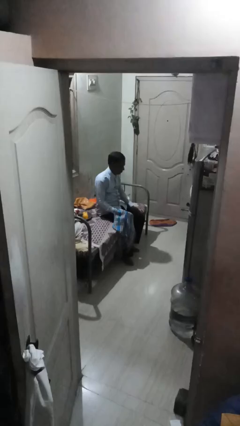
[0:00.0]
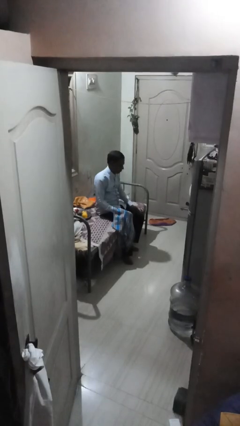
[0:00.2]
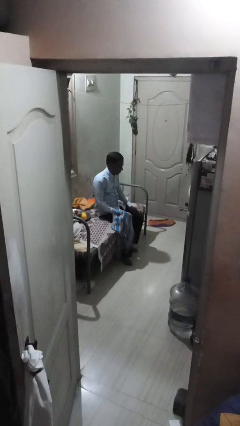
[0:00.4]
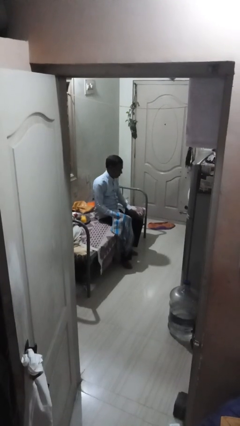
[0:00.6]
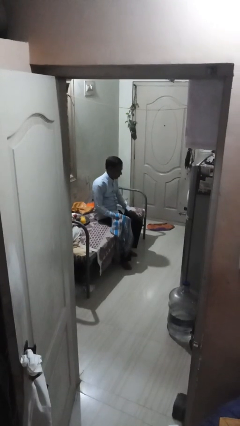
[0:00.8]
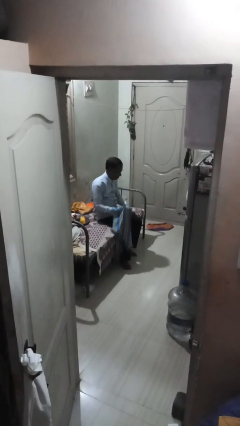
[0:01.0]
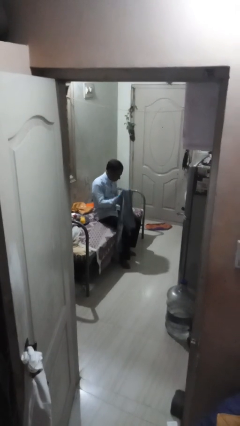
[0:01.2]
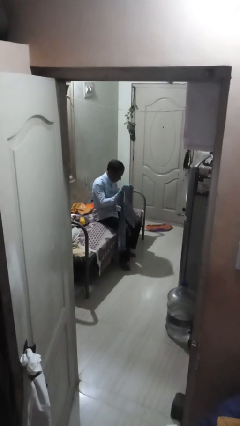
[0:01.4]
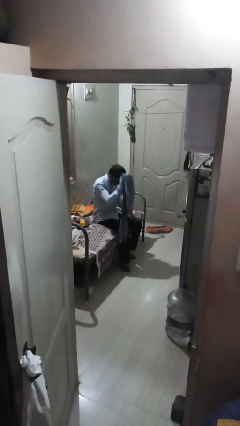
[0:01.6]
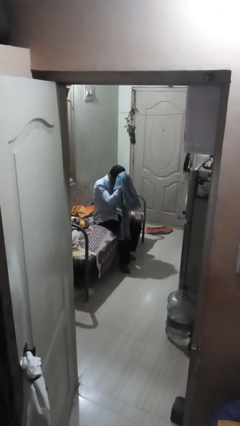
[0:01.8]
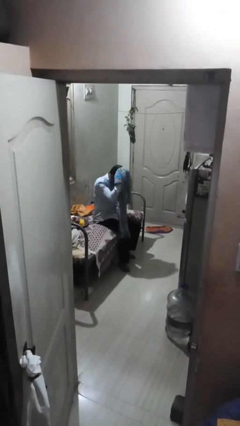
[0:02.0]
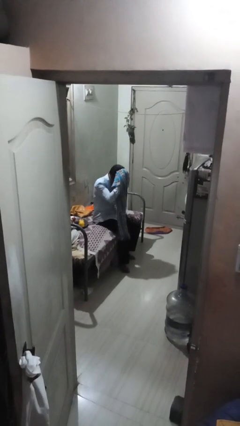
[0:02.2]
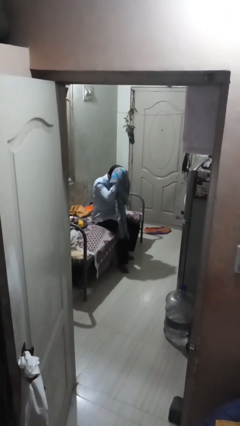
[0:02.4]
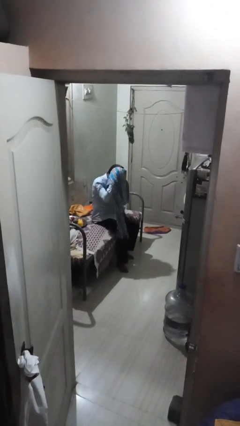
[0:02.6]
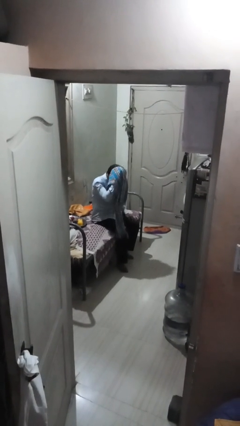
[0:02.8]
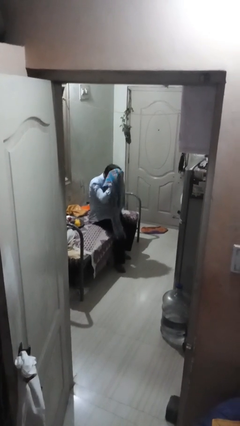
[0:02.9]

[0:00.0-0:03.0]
person dries hair with towel

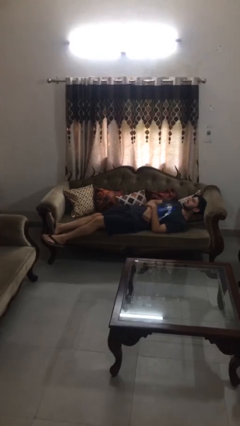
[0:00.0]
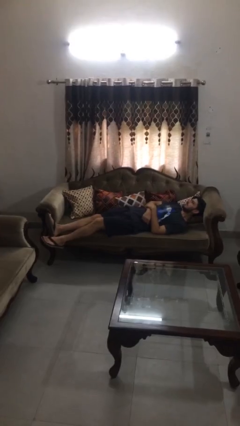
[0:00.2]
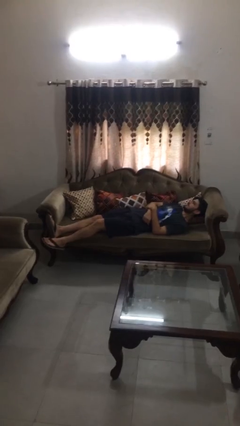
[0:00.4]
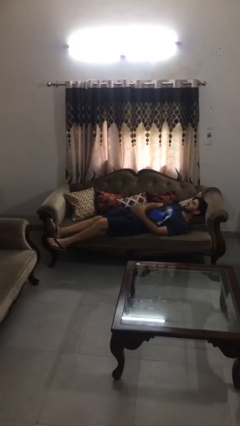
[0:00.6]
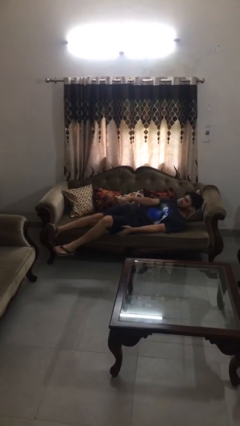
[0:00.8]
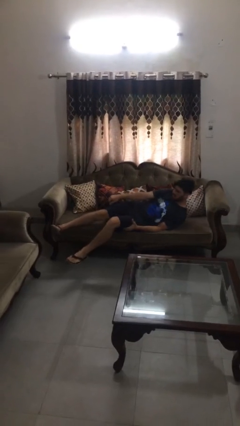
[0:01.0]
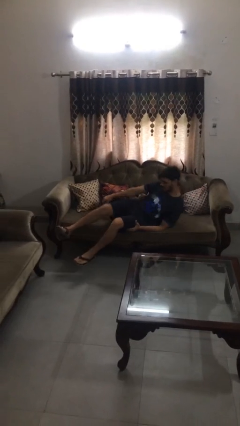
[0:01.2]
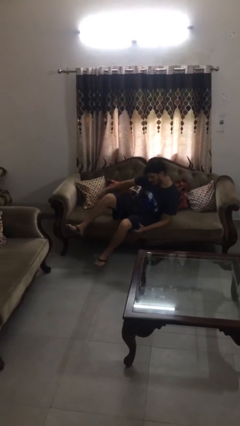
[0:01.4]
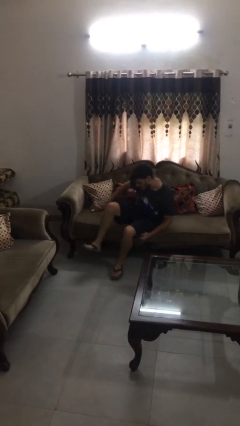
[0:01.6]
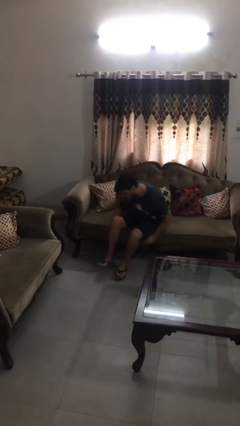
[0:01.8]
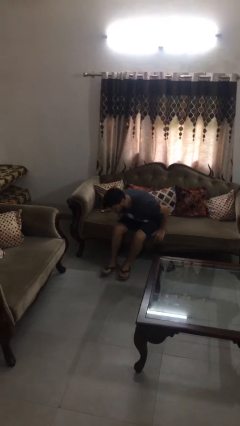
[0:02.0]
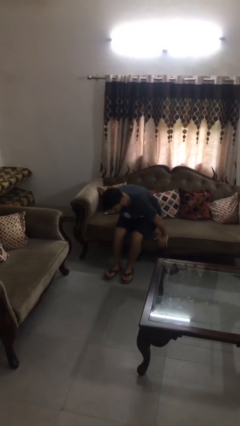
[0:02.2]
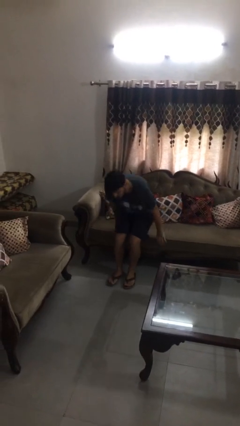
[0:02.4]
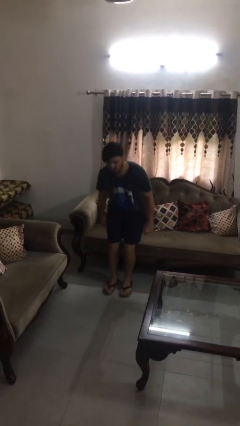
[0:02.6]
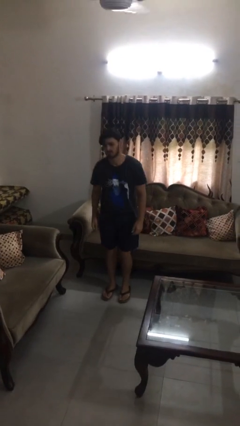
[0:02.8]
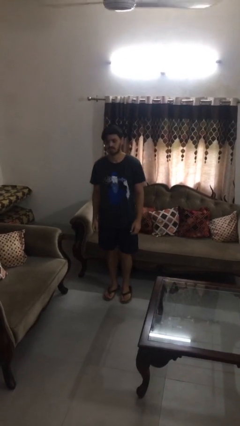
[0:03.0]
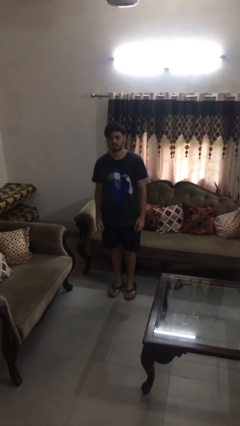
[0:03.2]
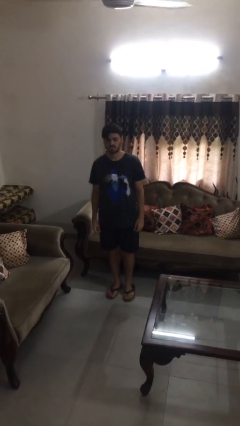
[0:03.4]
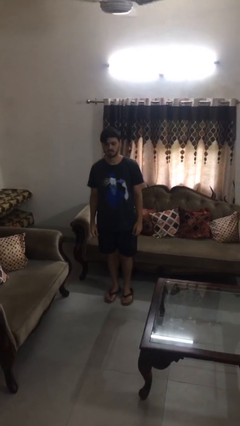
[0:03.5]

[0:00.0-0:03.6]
person stands up

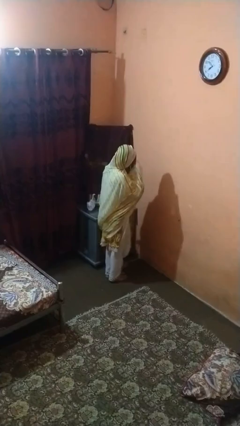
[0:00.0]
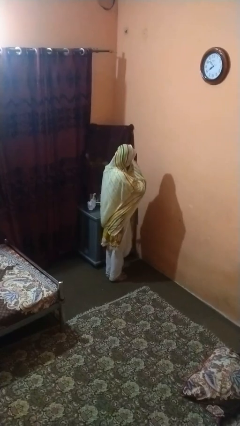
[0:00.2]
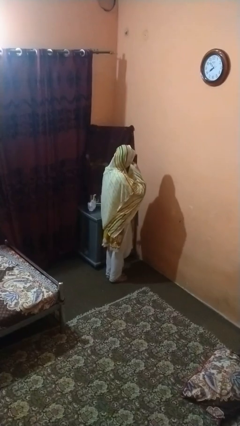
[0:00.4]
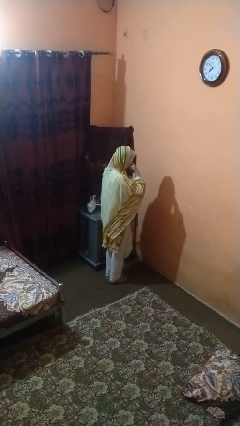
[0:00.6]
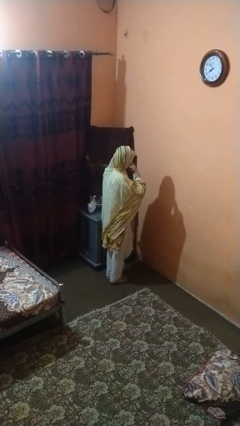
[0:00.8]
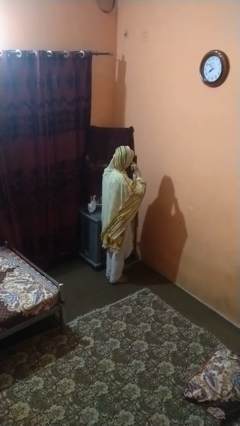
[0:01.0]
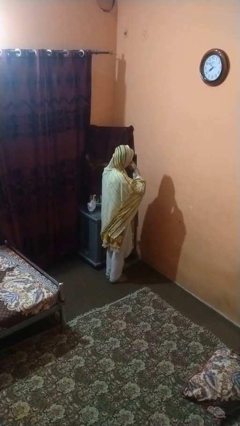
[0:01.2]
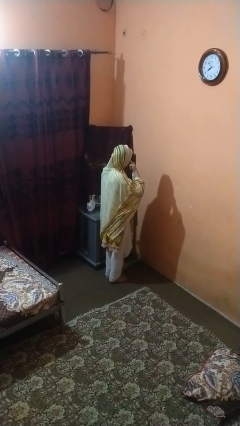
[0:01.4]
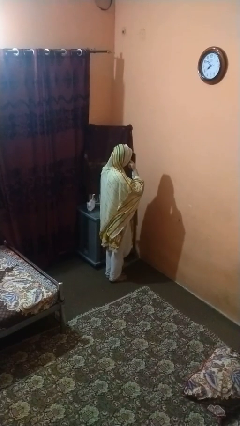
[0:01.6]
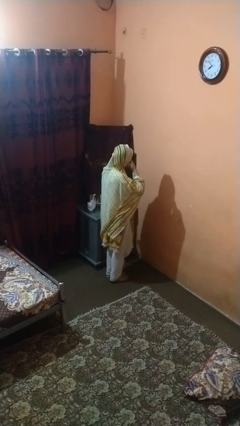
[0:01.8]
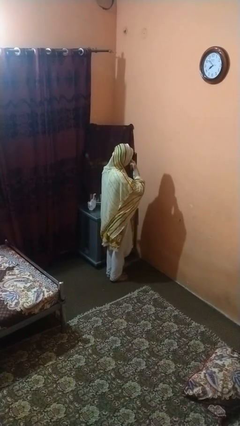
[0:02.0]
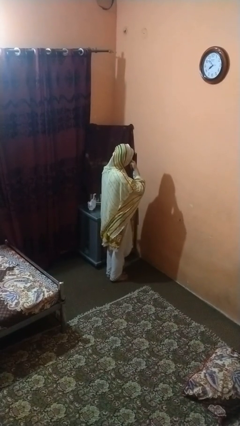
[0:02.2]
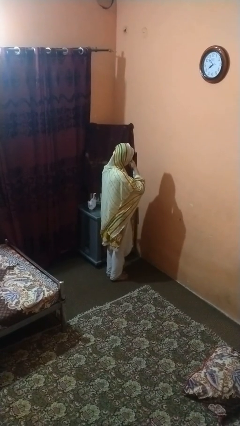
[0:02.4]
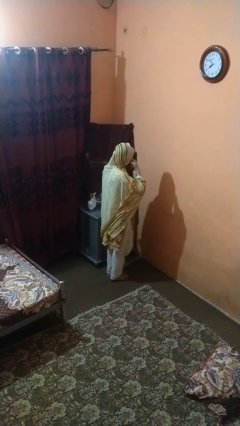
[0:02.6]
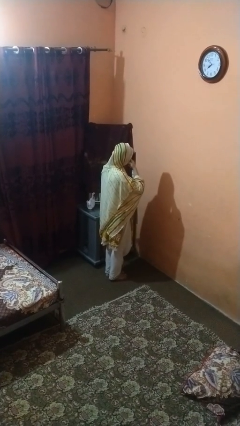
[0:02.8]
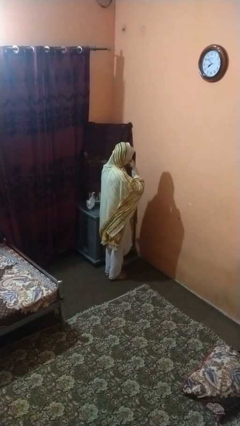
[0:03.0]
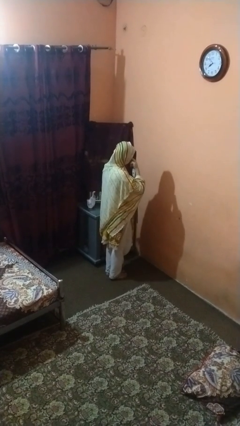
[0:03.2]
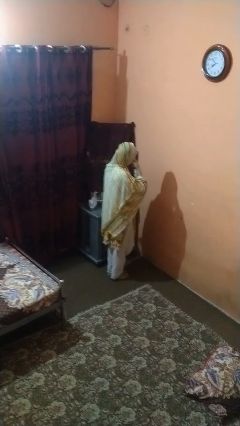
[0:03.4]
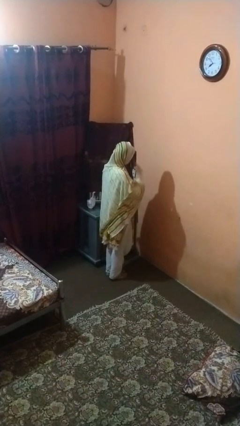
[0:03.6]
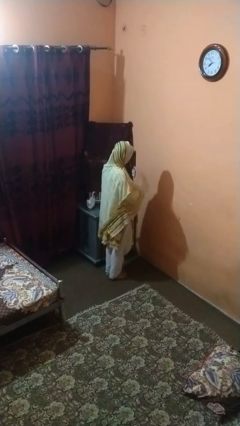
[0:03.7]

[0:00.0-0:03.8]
person rubs eyes

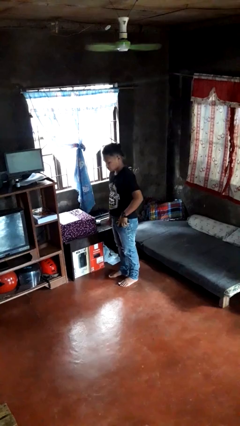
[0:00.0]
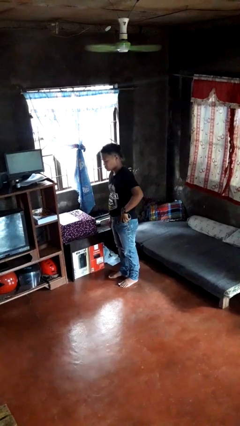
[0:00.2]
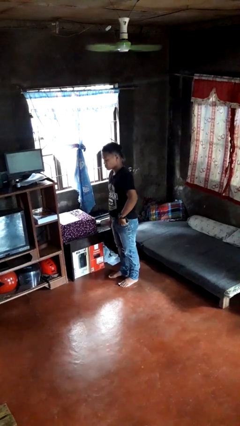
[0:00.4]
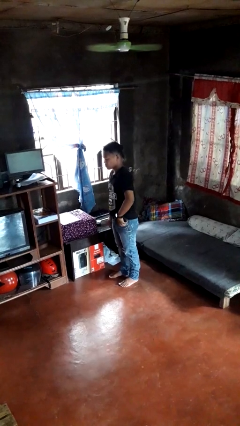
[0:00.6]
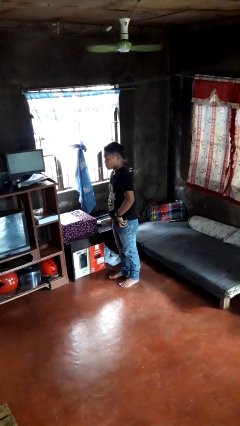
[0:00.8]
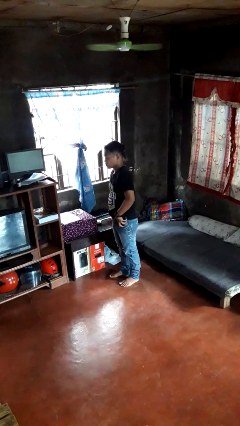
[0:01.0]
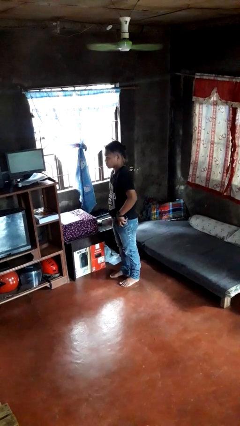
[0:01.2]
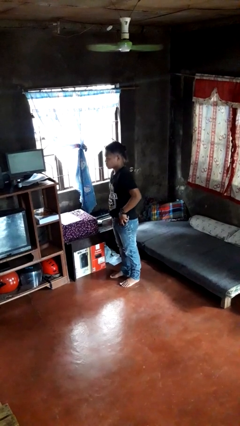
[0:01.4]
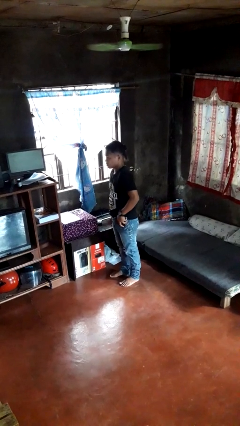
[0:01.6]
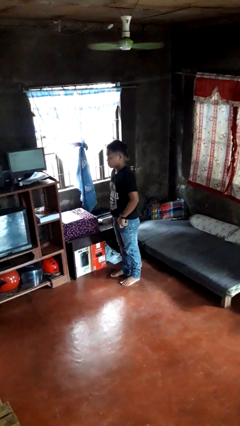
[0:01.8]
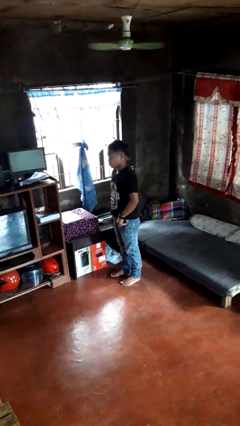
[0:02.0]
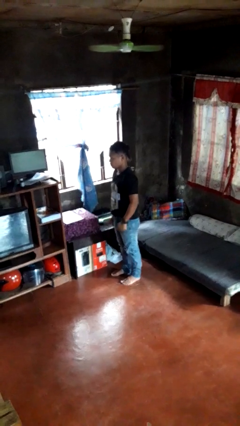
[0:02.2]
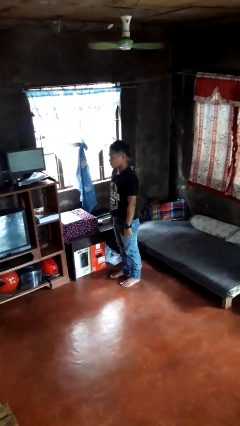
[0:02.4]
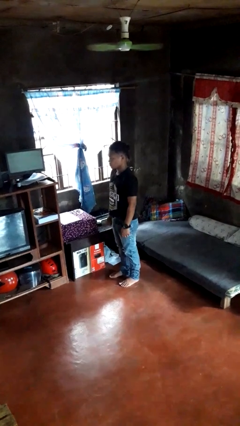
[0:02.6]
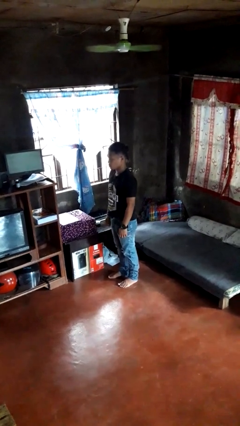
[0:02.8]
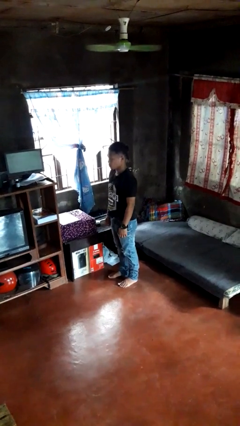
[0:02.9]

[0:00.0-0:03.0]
person puts phone into pocket

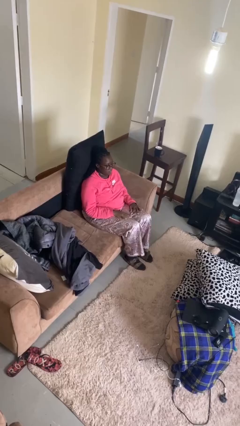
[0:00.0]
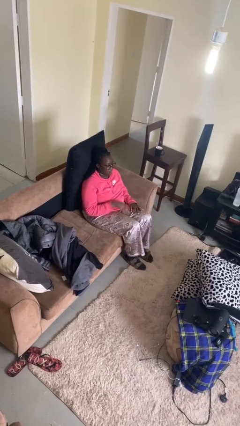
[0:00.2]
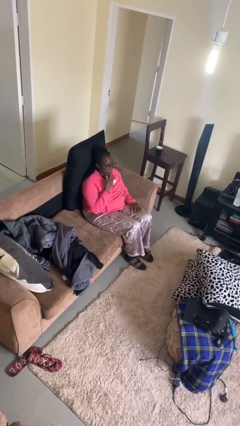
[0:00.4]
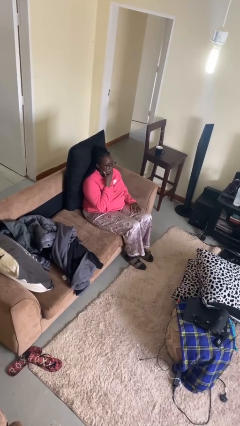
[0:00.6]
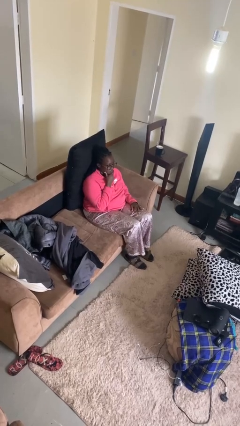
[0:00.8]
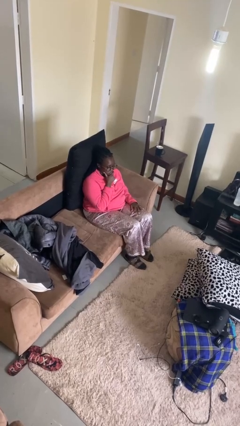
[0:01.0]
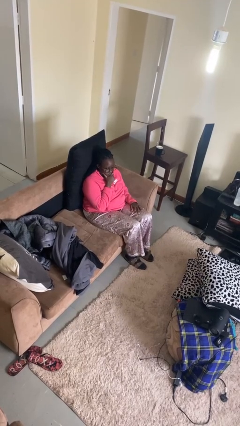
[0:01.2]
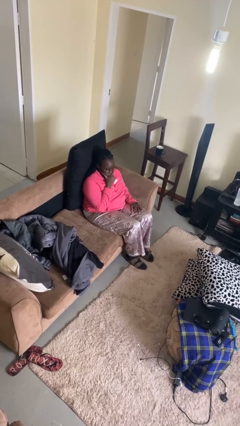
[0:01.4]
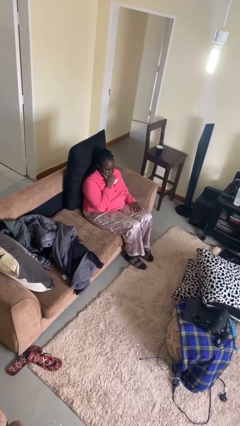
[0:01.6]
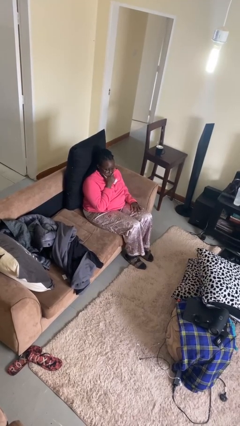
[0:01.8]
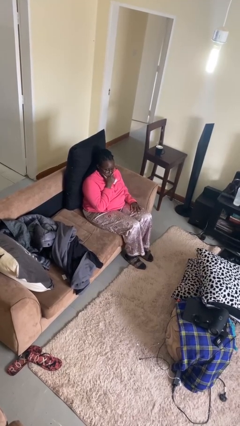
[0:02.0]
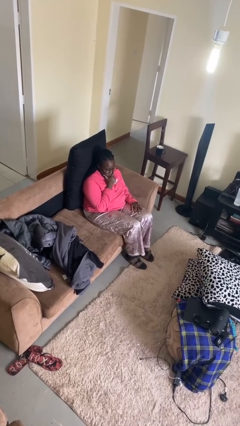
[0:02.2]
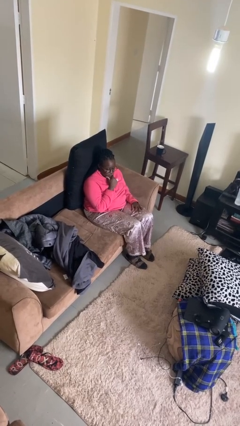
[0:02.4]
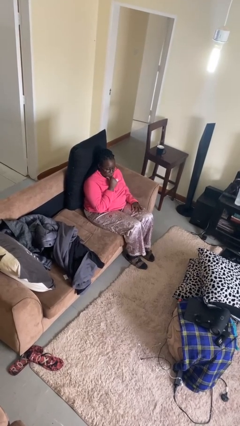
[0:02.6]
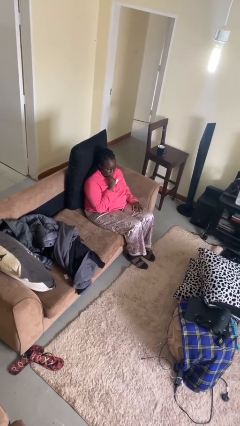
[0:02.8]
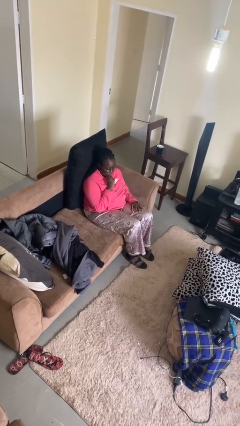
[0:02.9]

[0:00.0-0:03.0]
person strokes chin

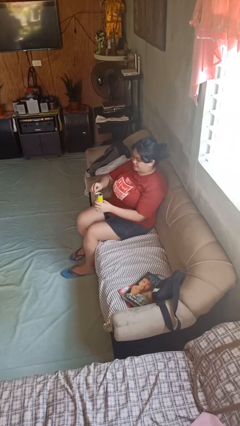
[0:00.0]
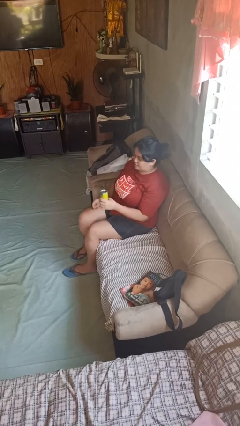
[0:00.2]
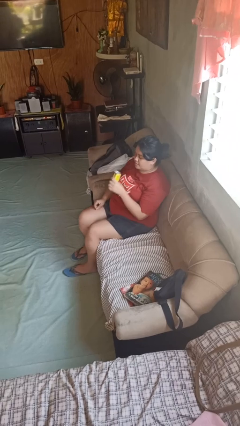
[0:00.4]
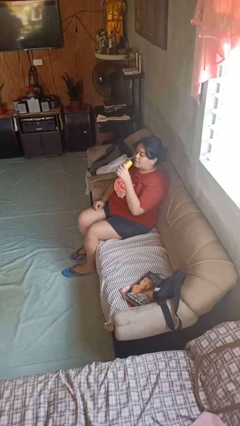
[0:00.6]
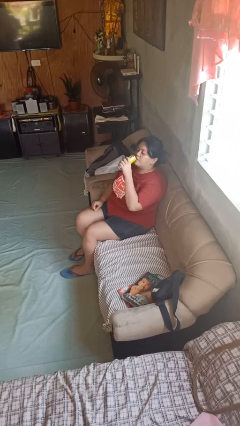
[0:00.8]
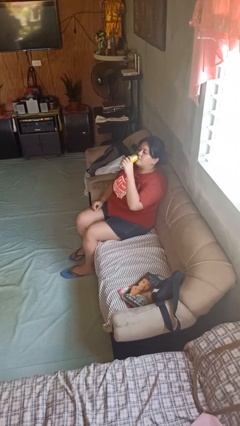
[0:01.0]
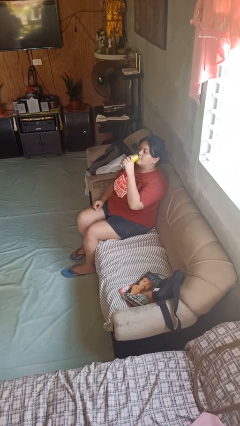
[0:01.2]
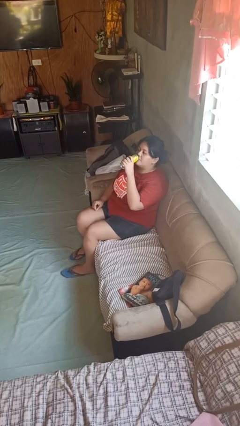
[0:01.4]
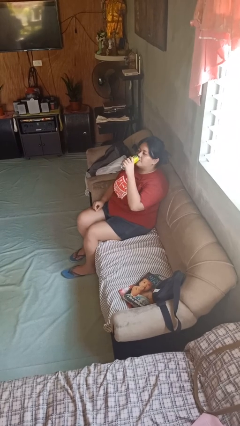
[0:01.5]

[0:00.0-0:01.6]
person drinks from beverage can
